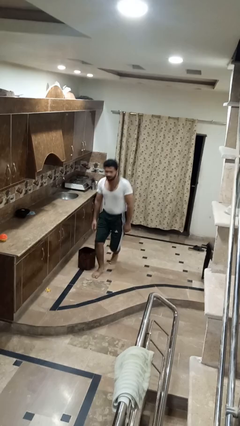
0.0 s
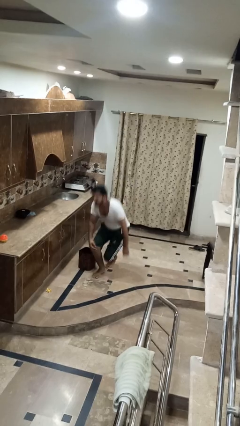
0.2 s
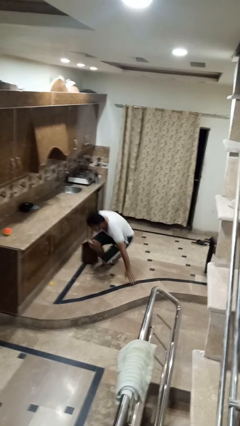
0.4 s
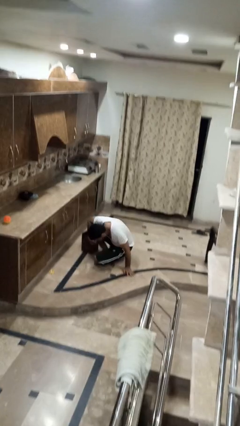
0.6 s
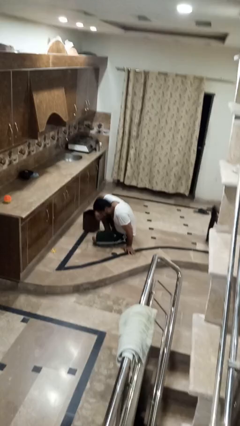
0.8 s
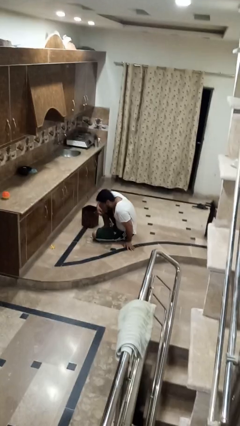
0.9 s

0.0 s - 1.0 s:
person trips on object on floor

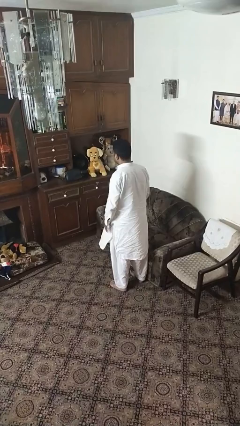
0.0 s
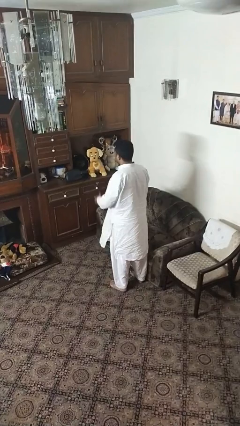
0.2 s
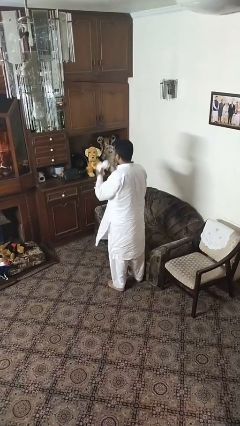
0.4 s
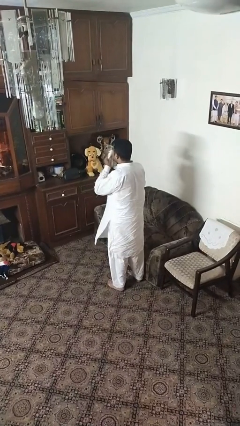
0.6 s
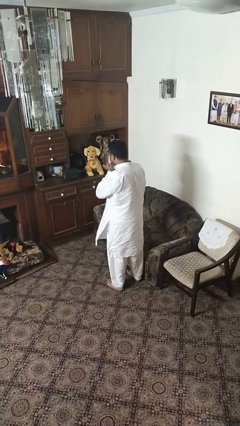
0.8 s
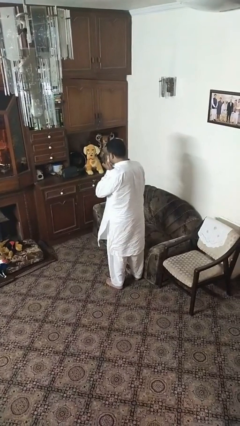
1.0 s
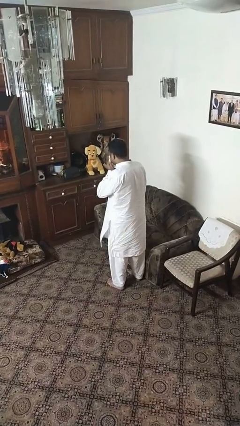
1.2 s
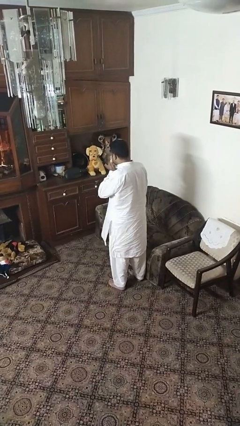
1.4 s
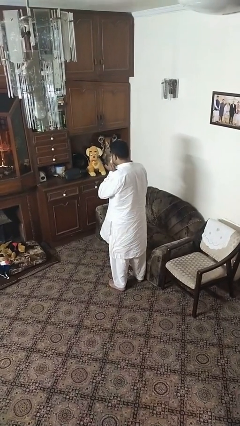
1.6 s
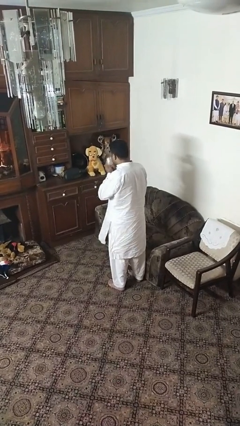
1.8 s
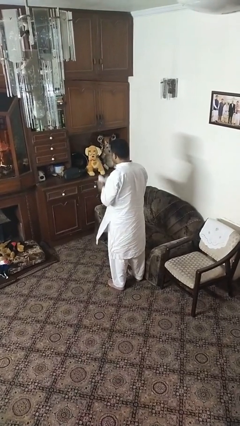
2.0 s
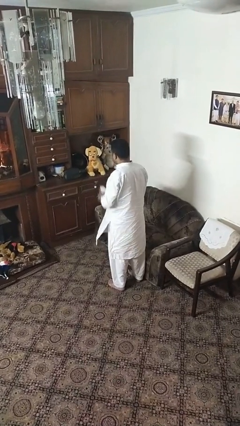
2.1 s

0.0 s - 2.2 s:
person blows nose

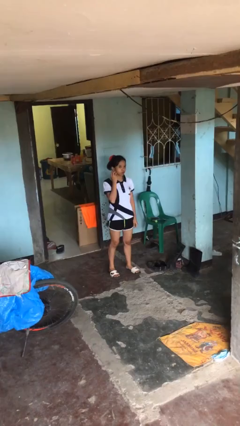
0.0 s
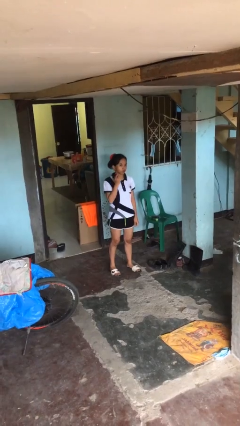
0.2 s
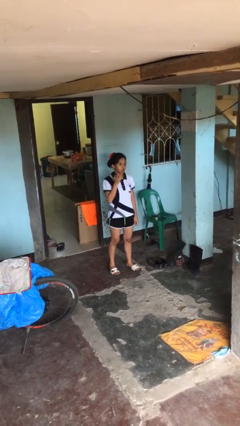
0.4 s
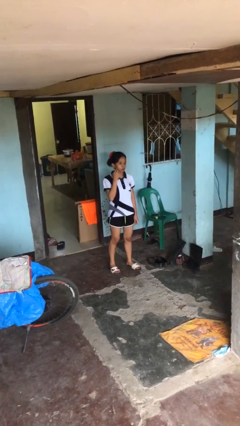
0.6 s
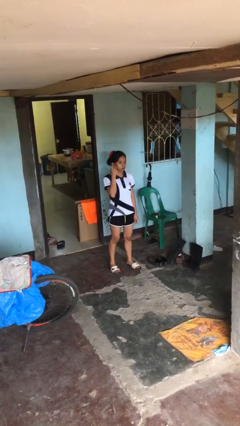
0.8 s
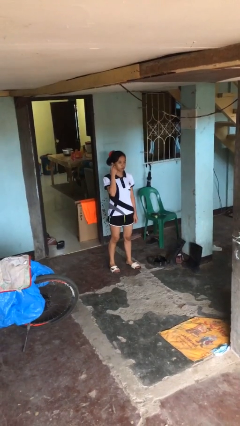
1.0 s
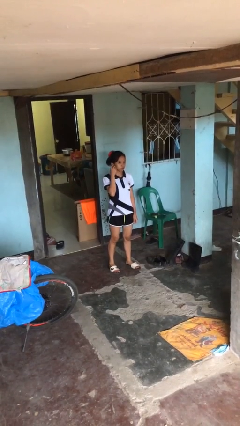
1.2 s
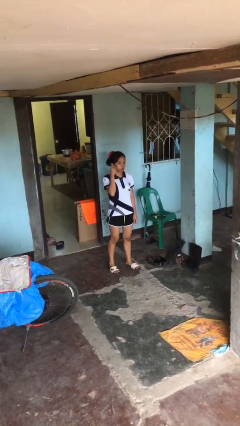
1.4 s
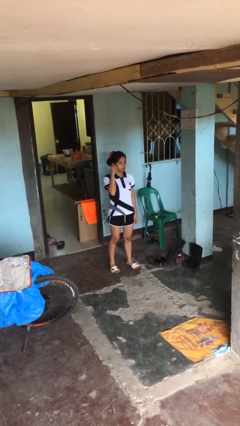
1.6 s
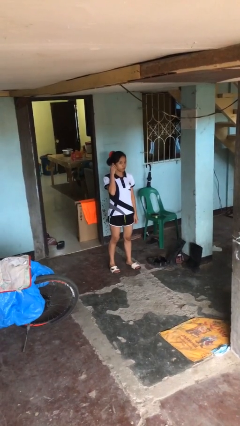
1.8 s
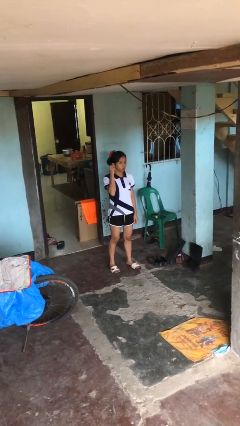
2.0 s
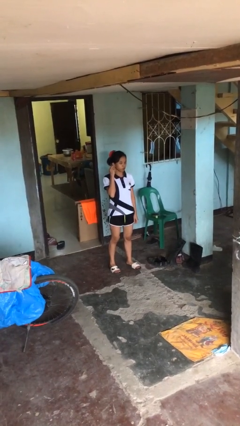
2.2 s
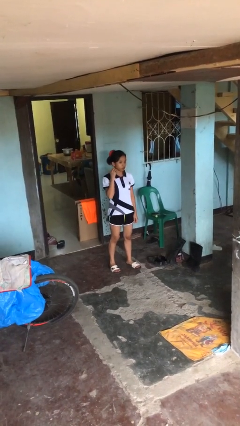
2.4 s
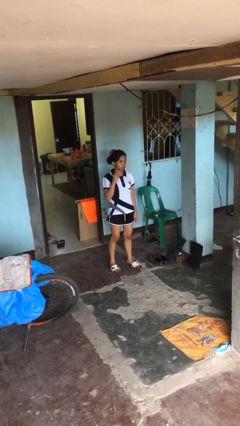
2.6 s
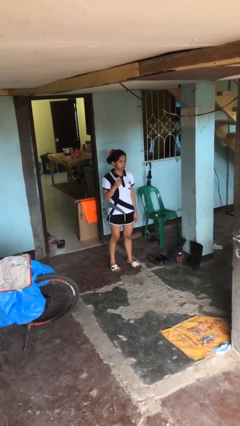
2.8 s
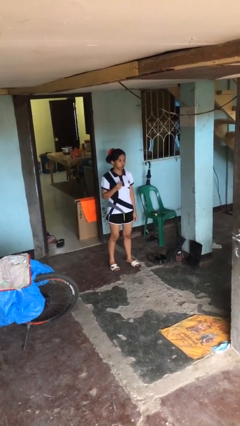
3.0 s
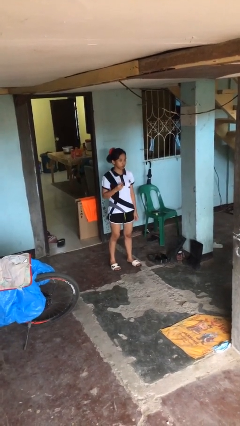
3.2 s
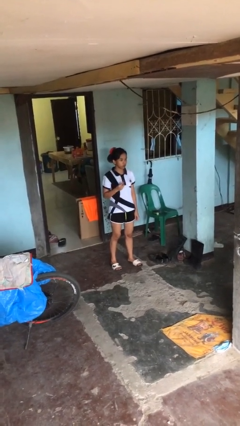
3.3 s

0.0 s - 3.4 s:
person takes off earrings

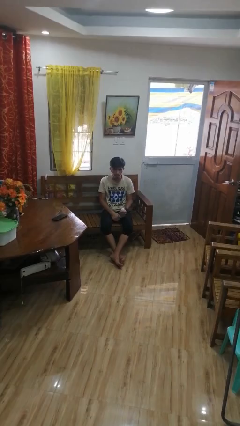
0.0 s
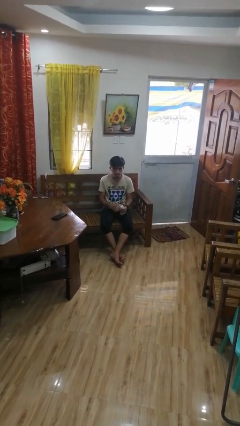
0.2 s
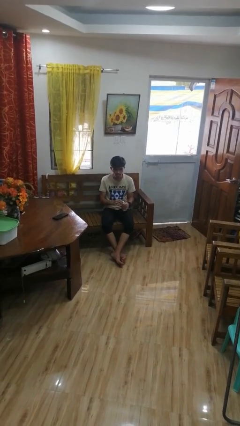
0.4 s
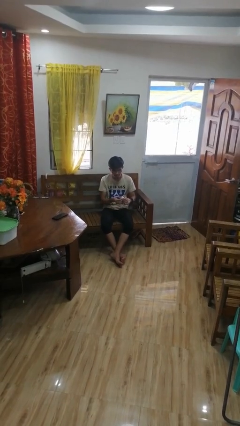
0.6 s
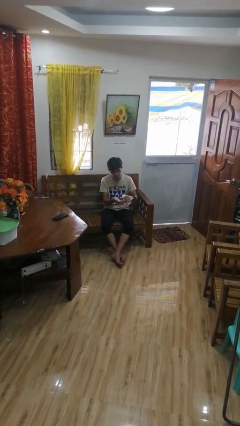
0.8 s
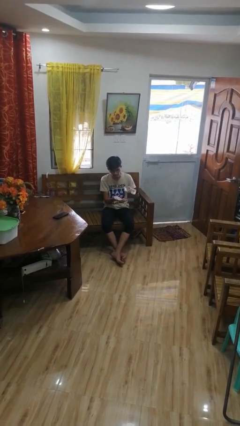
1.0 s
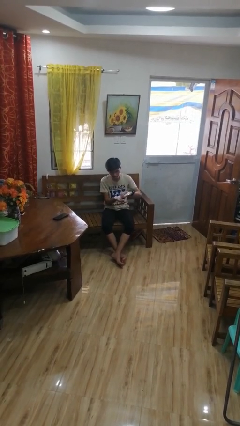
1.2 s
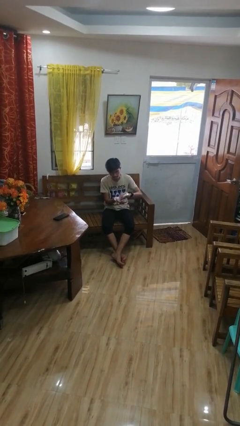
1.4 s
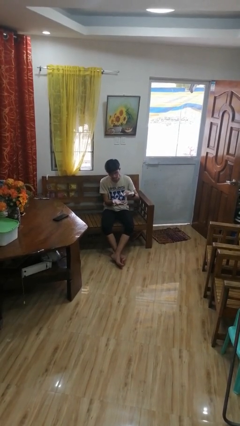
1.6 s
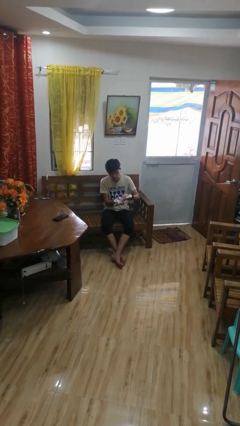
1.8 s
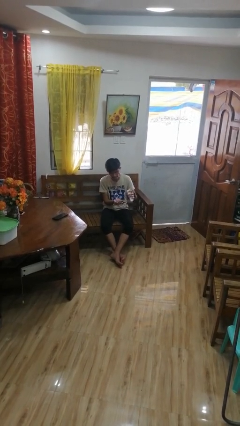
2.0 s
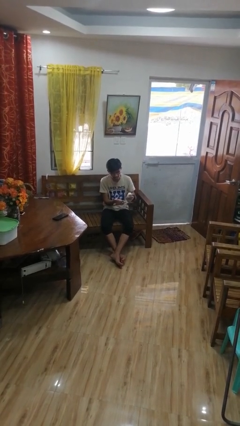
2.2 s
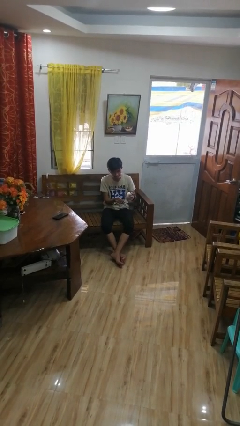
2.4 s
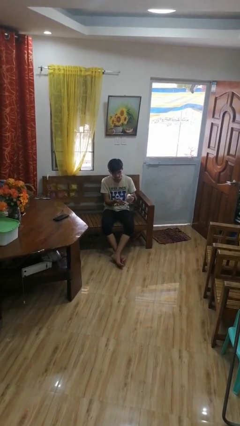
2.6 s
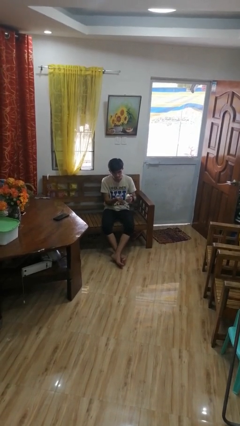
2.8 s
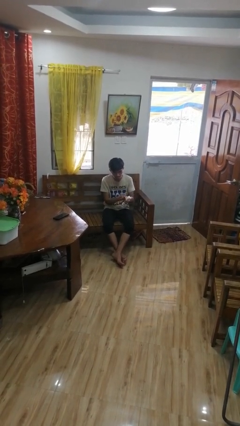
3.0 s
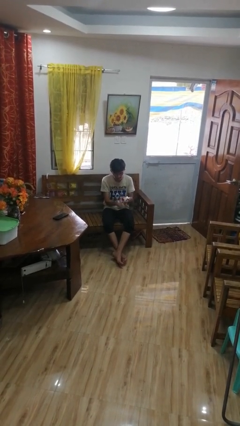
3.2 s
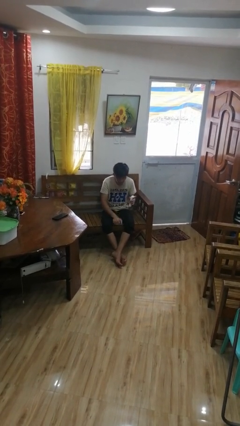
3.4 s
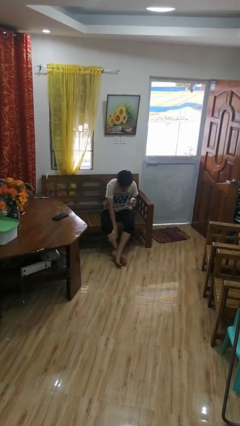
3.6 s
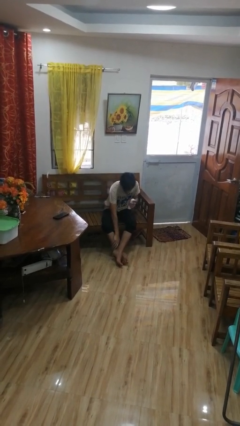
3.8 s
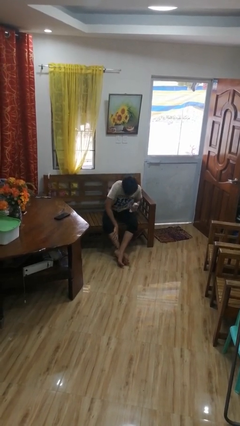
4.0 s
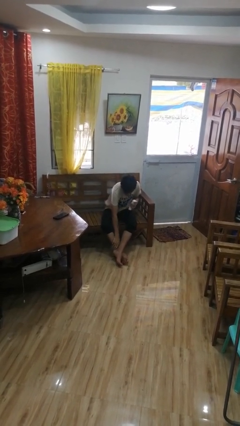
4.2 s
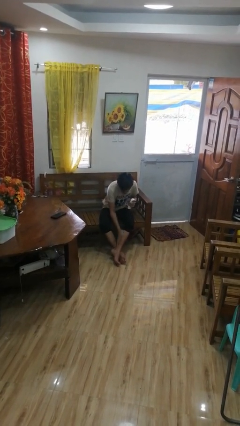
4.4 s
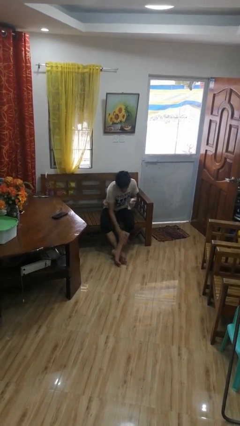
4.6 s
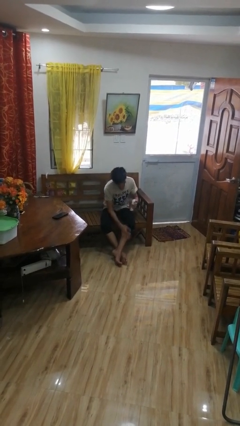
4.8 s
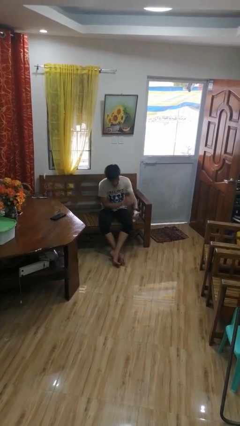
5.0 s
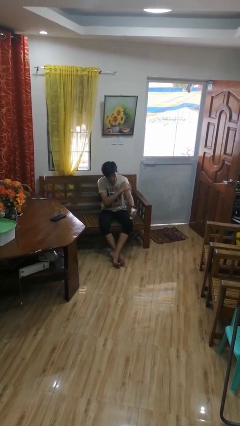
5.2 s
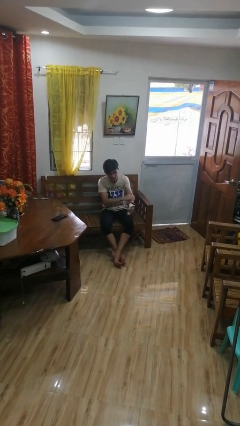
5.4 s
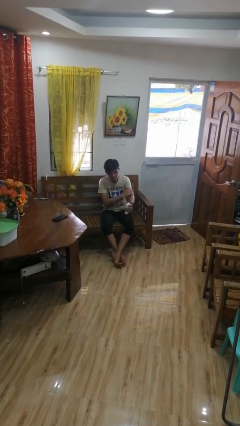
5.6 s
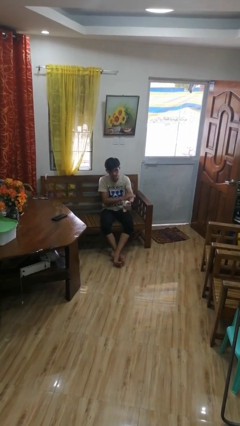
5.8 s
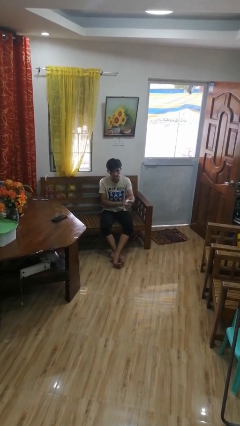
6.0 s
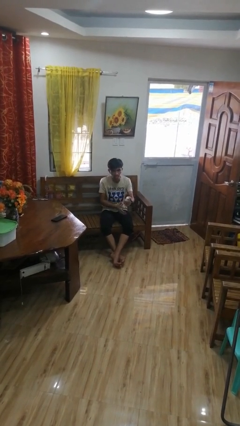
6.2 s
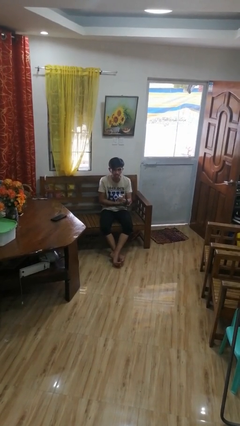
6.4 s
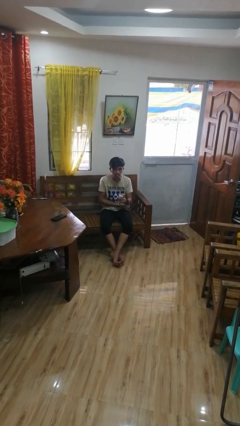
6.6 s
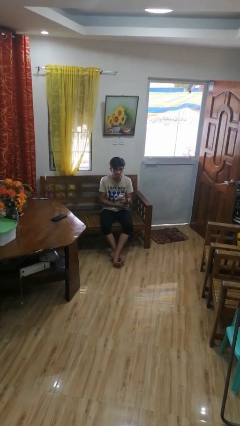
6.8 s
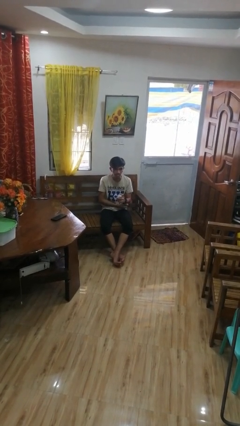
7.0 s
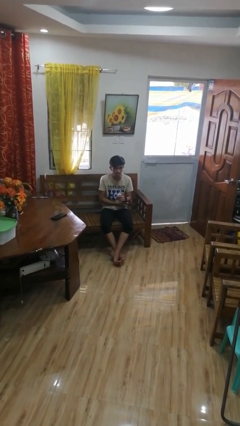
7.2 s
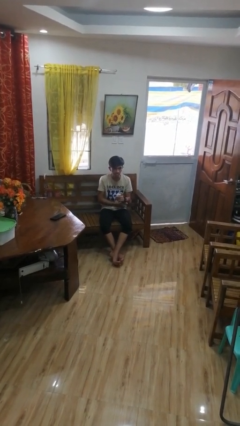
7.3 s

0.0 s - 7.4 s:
person applies sunscreen

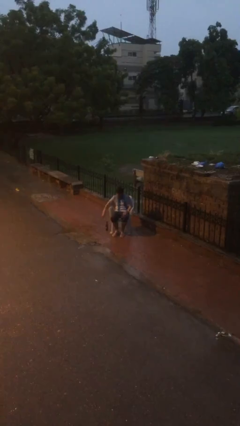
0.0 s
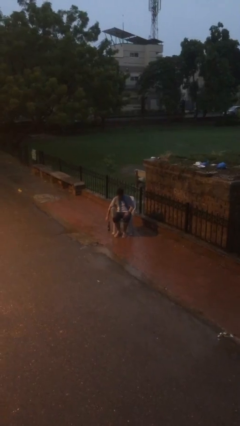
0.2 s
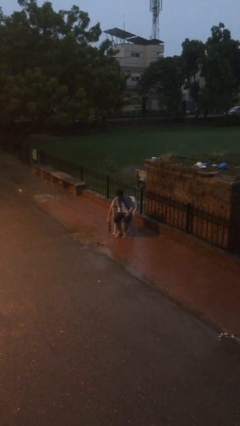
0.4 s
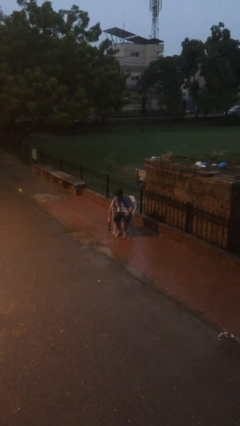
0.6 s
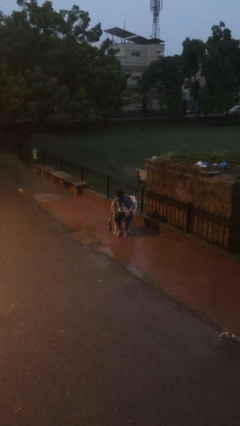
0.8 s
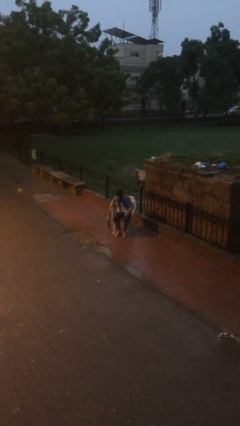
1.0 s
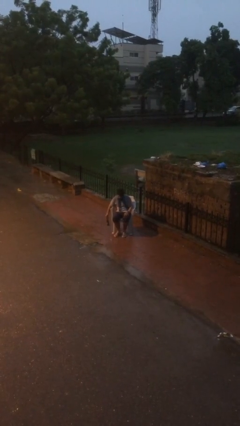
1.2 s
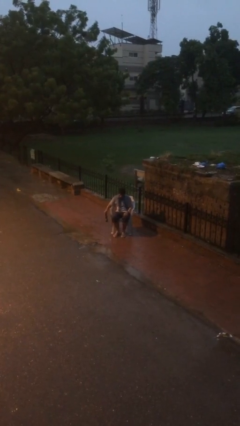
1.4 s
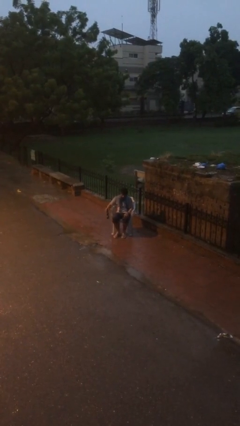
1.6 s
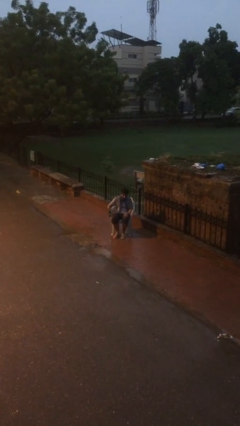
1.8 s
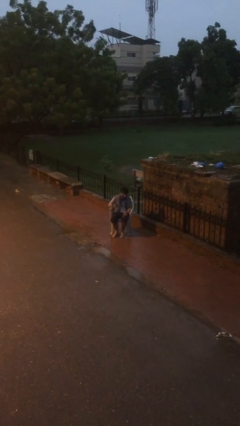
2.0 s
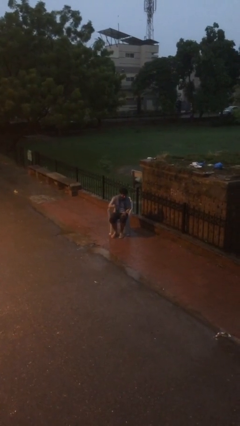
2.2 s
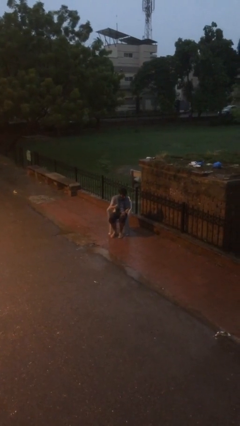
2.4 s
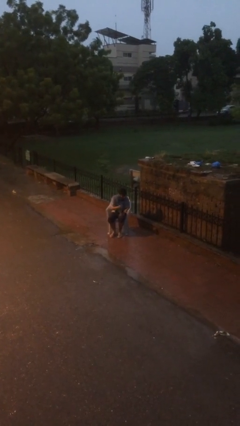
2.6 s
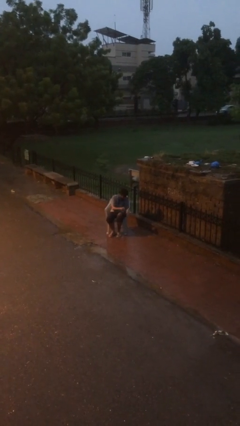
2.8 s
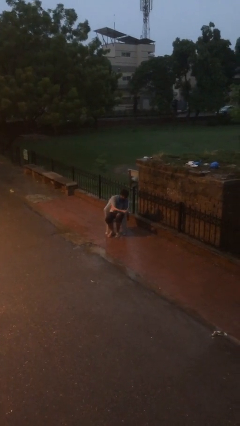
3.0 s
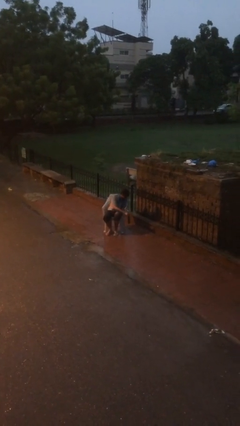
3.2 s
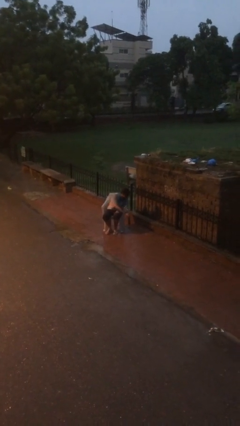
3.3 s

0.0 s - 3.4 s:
person picks up object from floor

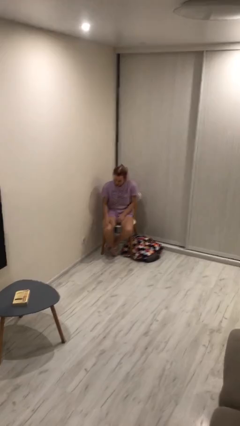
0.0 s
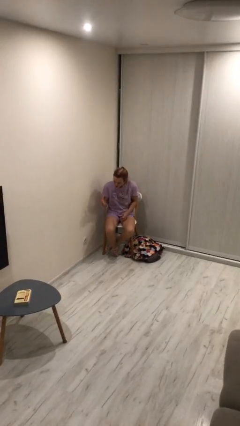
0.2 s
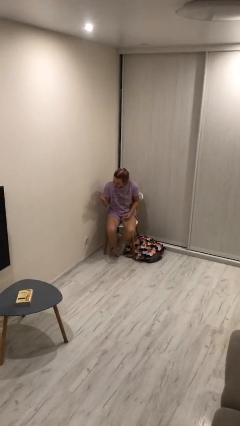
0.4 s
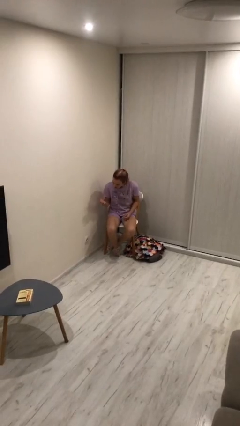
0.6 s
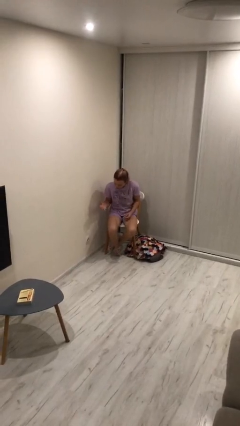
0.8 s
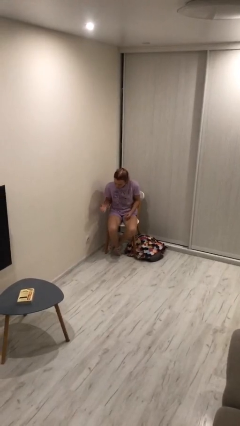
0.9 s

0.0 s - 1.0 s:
person swats bug
